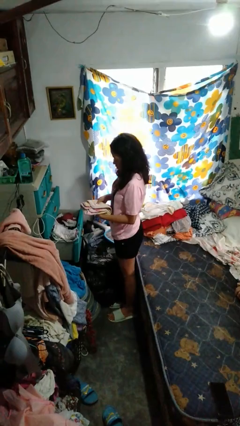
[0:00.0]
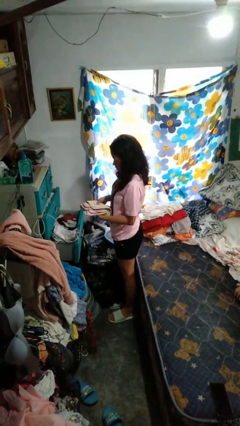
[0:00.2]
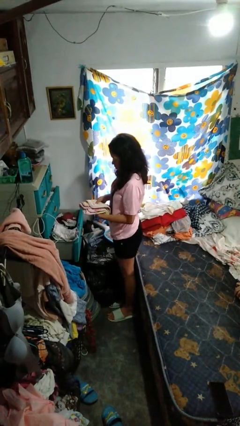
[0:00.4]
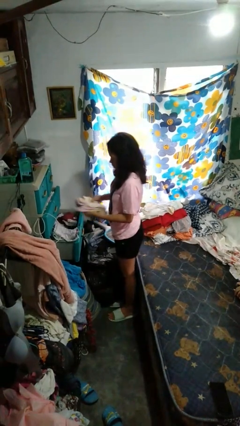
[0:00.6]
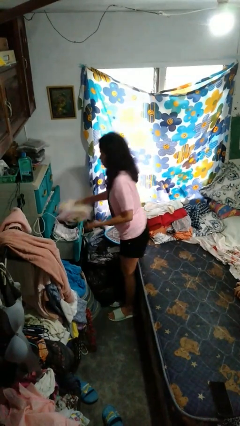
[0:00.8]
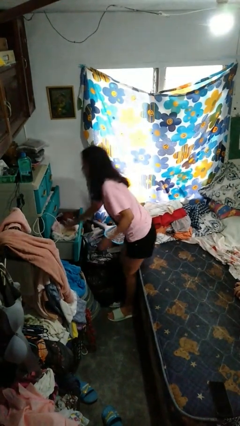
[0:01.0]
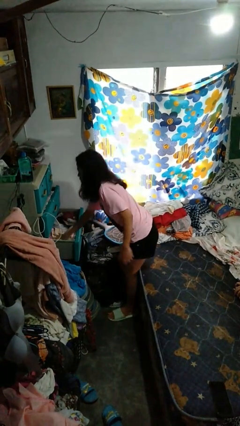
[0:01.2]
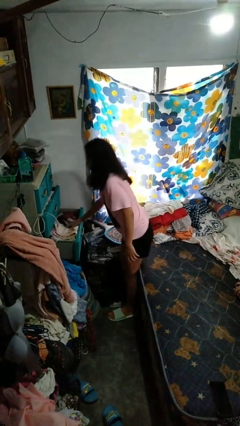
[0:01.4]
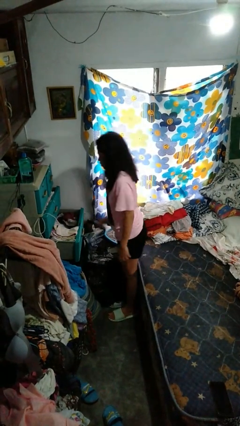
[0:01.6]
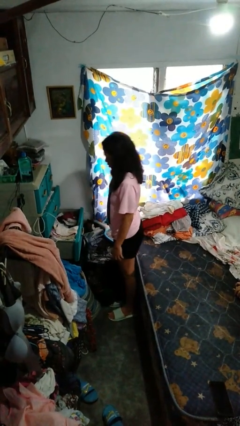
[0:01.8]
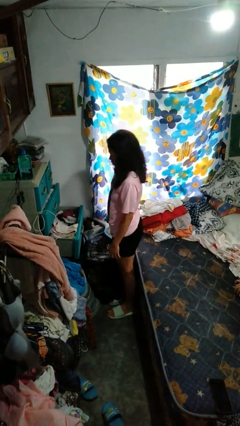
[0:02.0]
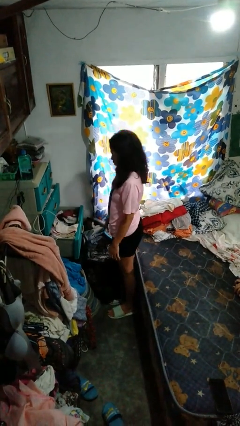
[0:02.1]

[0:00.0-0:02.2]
person puts clothes into dresser

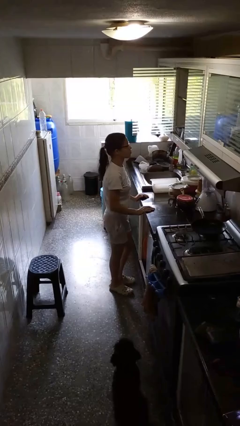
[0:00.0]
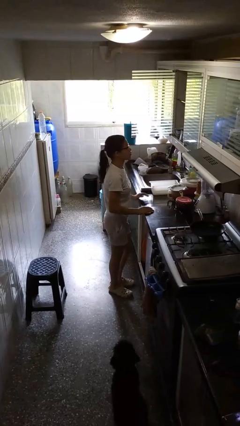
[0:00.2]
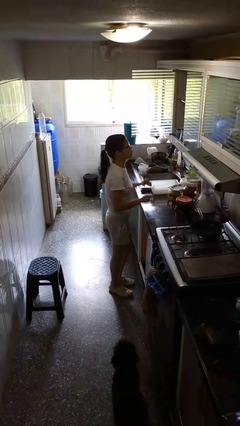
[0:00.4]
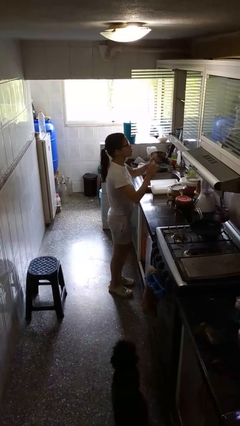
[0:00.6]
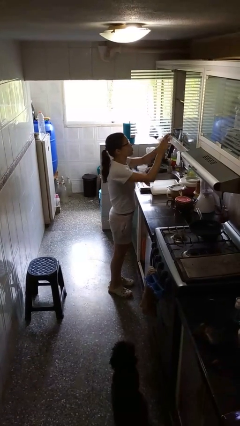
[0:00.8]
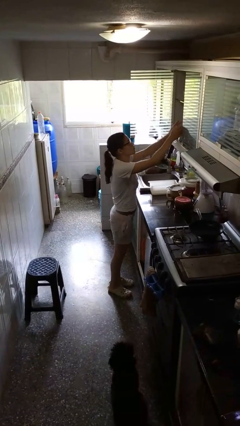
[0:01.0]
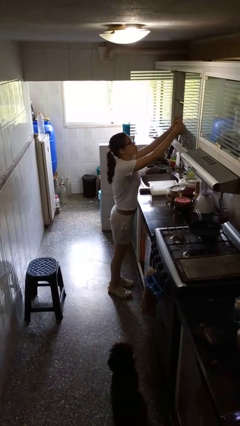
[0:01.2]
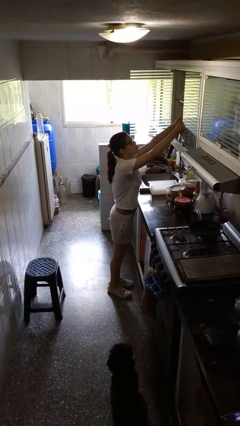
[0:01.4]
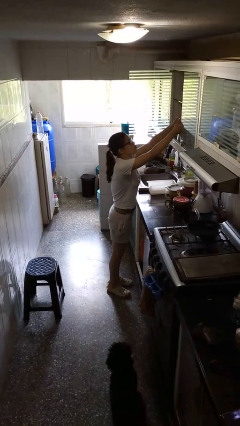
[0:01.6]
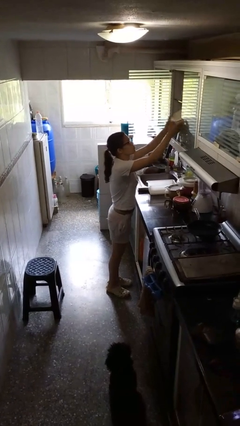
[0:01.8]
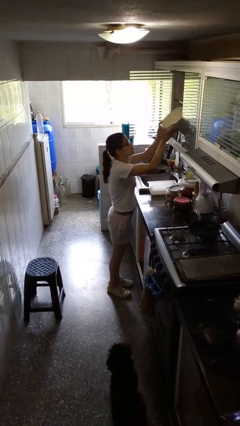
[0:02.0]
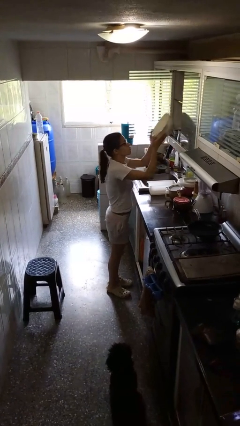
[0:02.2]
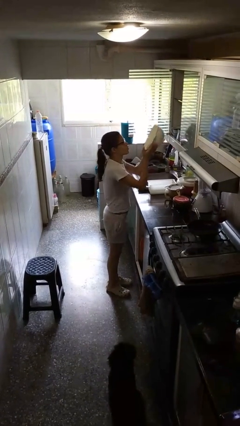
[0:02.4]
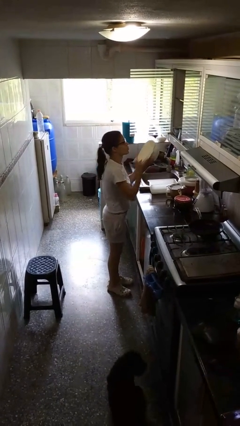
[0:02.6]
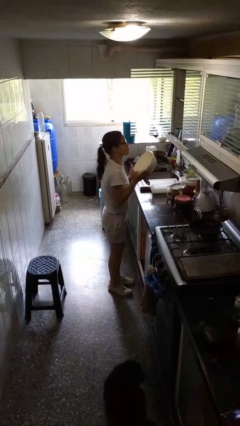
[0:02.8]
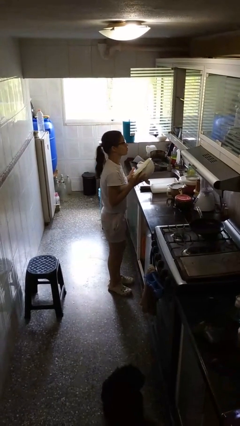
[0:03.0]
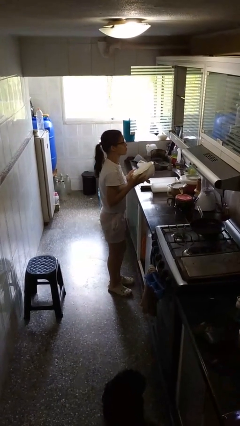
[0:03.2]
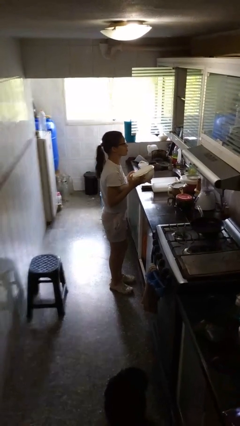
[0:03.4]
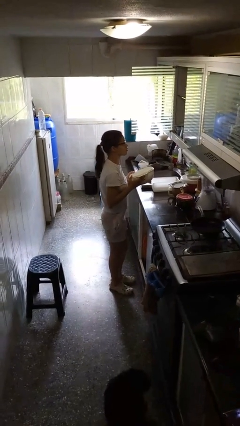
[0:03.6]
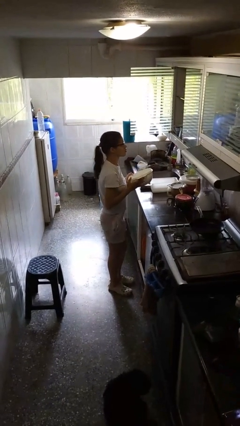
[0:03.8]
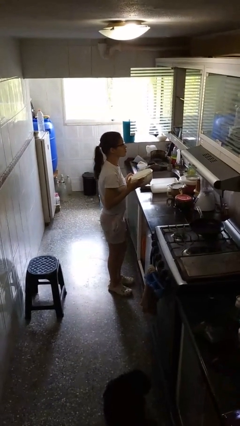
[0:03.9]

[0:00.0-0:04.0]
person picks up object from cabinet

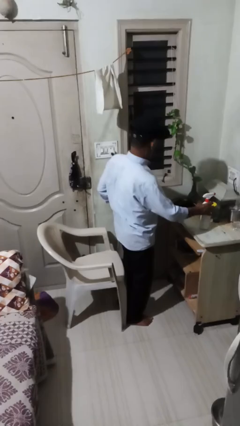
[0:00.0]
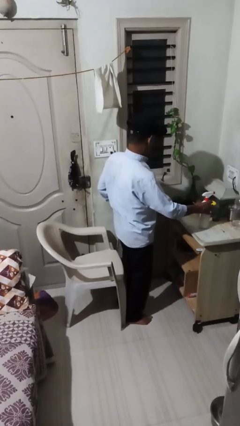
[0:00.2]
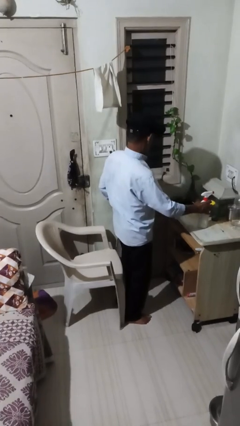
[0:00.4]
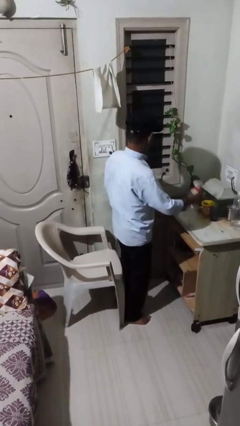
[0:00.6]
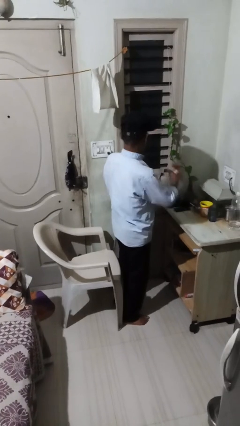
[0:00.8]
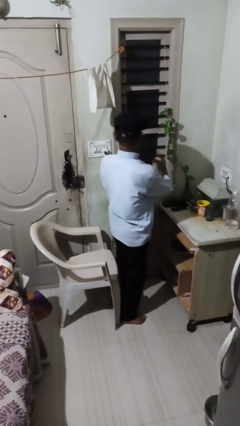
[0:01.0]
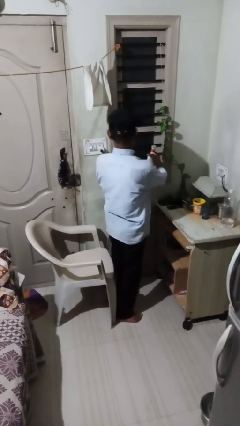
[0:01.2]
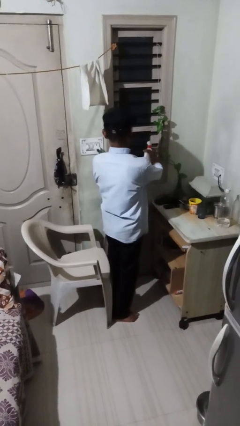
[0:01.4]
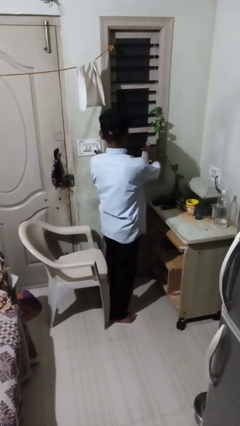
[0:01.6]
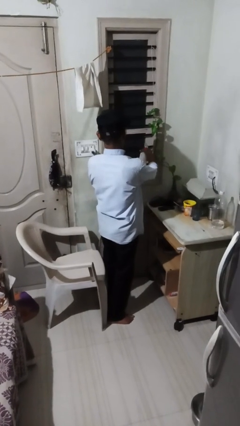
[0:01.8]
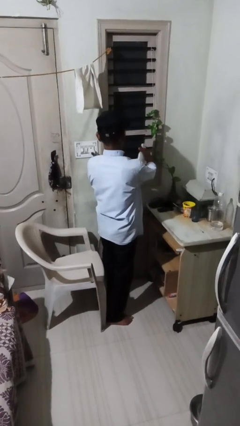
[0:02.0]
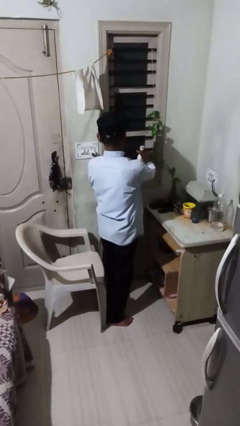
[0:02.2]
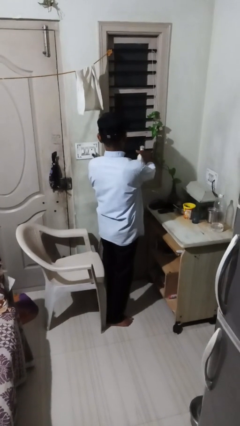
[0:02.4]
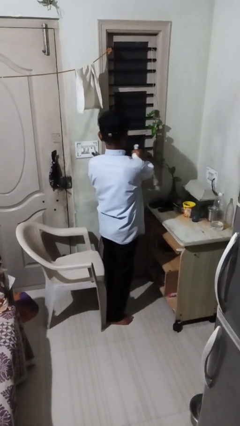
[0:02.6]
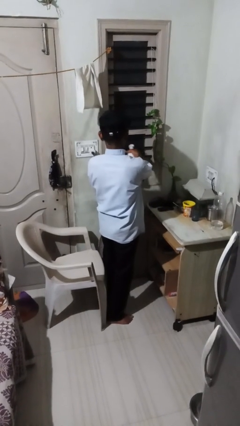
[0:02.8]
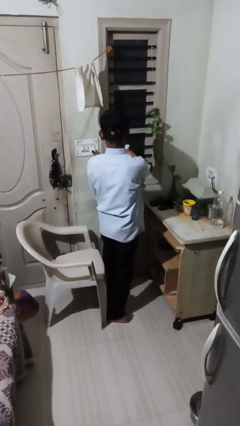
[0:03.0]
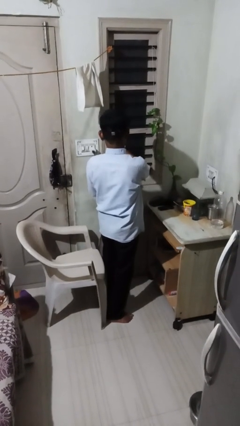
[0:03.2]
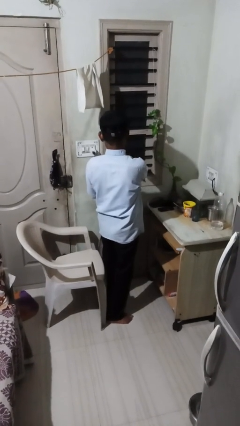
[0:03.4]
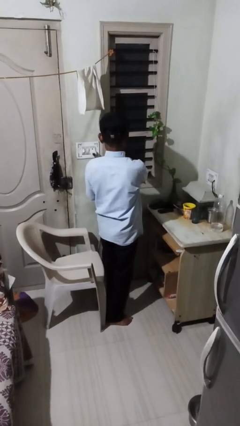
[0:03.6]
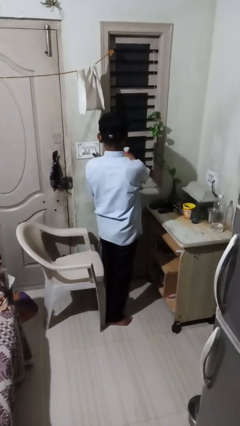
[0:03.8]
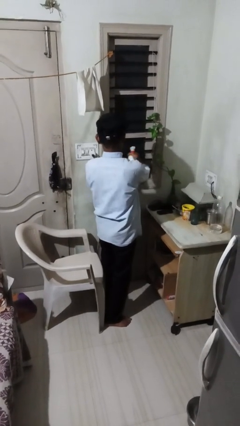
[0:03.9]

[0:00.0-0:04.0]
person sprays from bottle

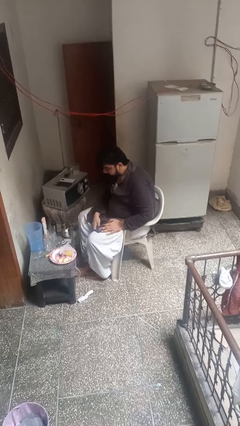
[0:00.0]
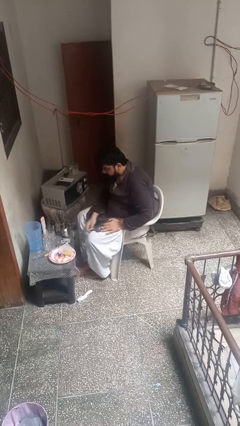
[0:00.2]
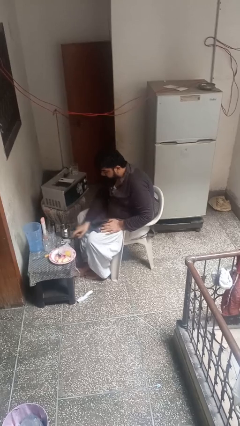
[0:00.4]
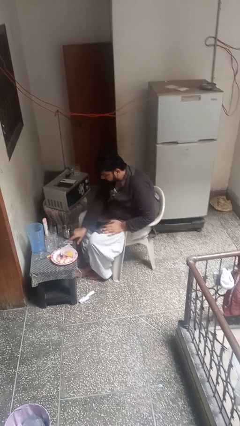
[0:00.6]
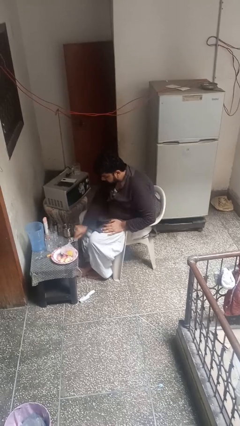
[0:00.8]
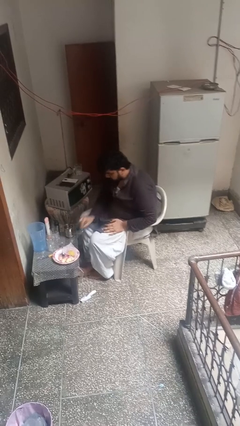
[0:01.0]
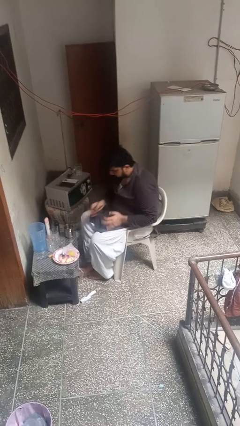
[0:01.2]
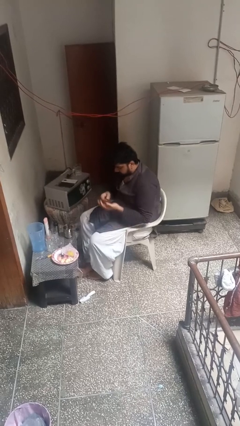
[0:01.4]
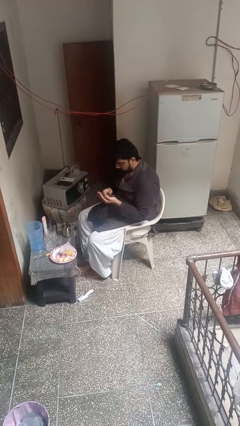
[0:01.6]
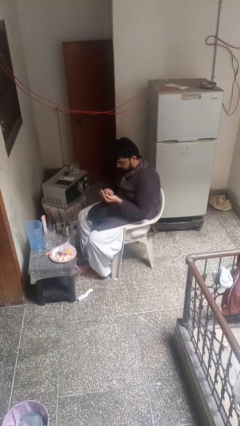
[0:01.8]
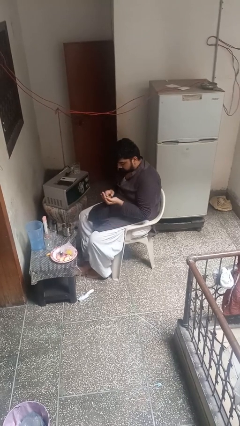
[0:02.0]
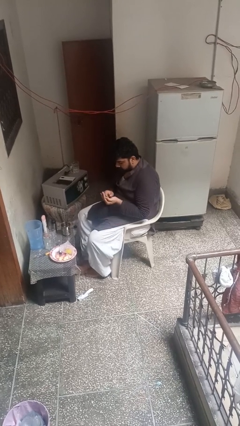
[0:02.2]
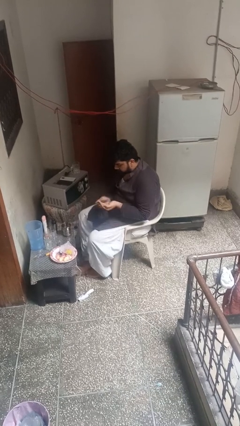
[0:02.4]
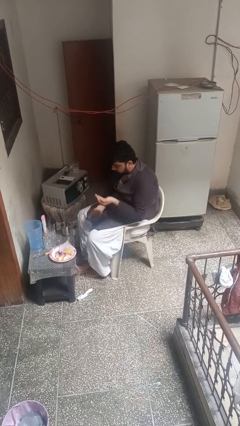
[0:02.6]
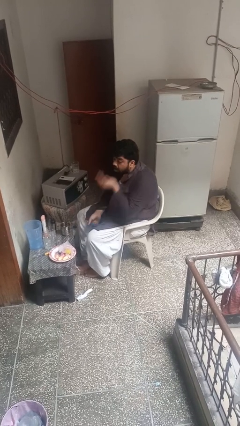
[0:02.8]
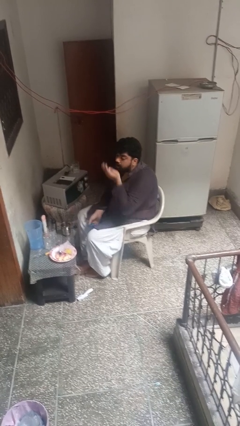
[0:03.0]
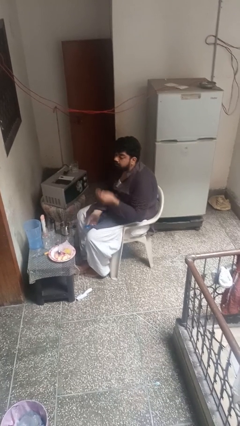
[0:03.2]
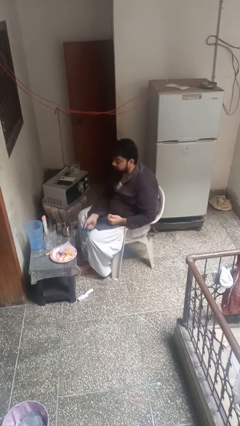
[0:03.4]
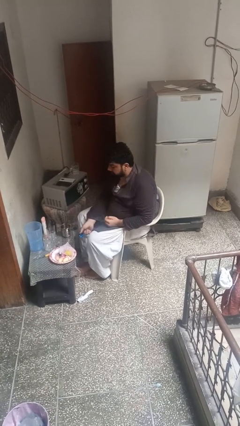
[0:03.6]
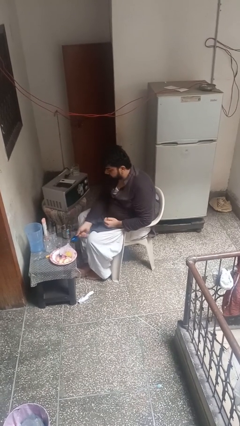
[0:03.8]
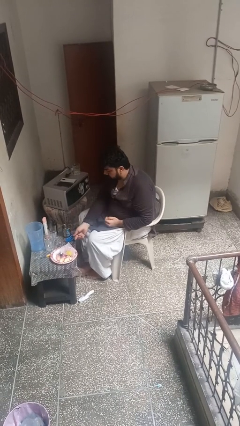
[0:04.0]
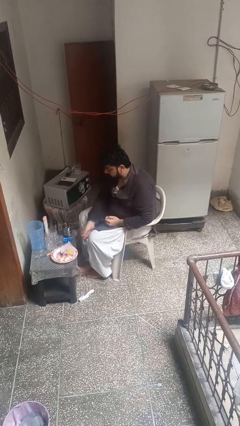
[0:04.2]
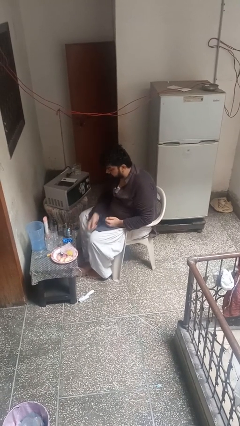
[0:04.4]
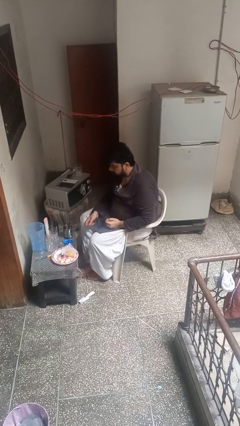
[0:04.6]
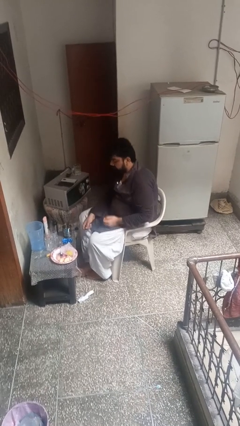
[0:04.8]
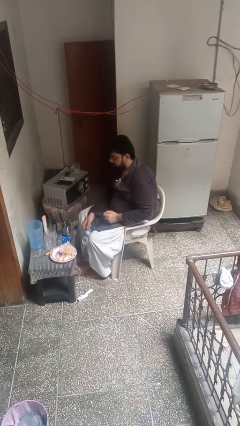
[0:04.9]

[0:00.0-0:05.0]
person takes medicine pills

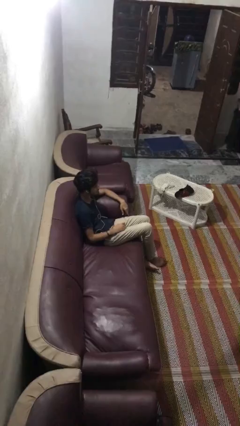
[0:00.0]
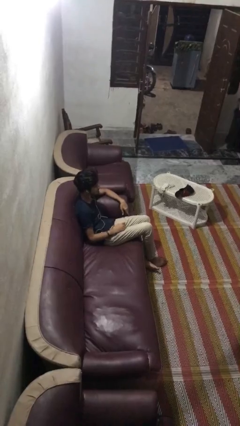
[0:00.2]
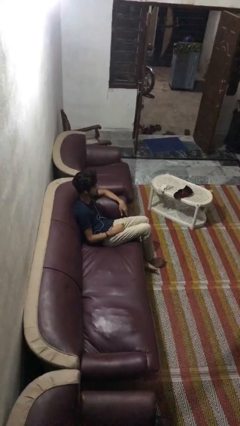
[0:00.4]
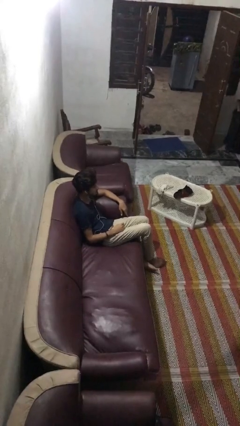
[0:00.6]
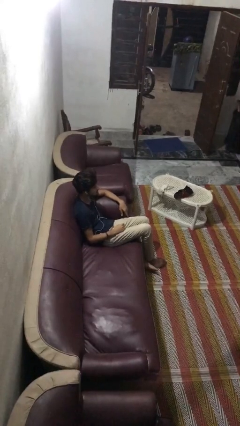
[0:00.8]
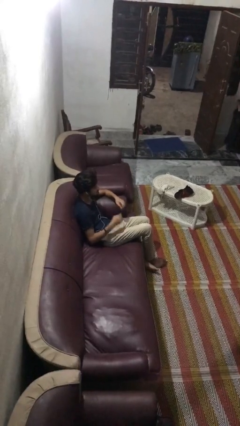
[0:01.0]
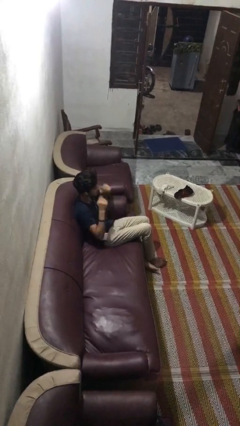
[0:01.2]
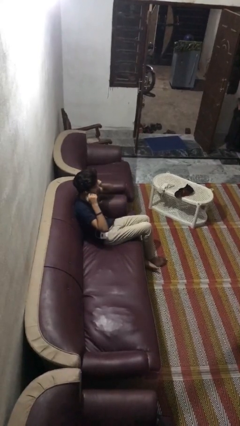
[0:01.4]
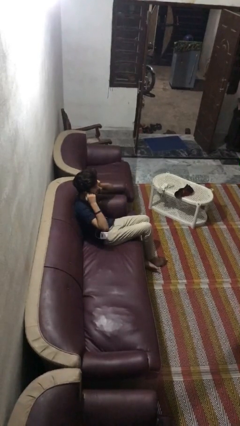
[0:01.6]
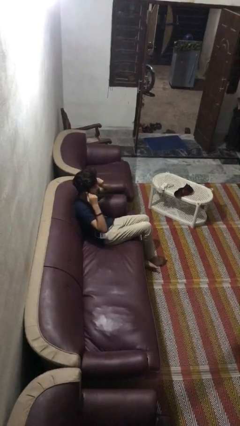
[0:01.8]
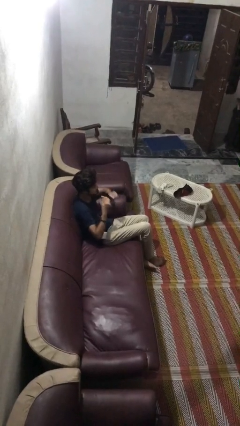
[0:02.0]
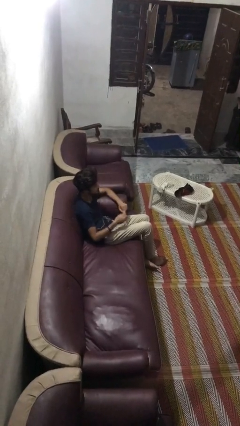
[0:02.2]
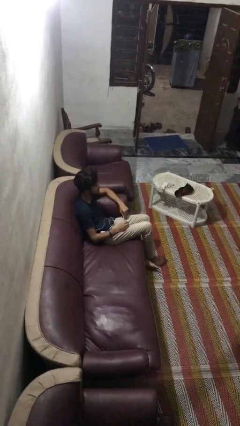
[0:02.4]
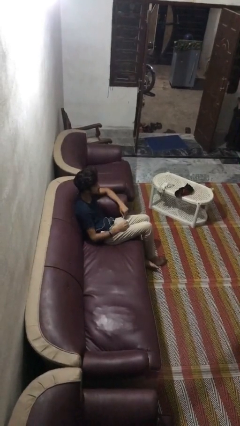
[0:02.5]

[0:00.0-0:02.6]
person takes off headphones
